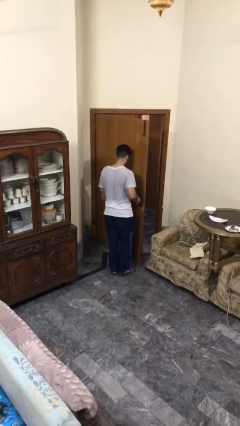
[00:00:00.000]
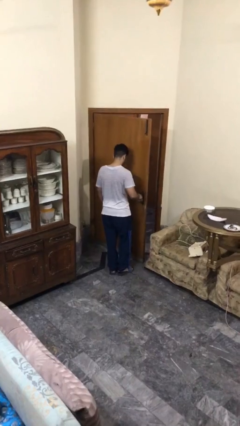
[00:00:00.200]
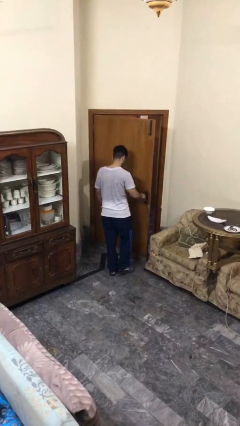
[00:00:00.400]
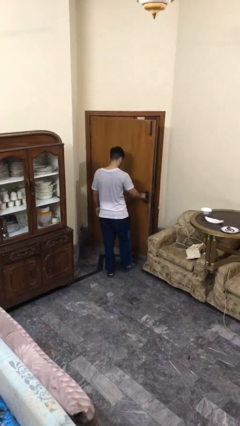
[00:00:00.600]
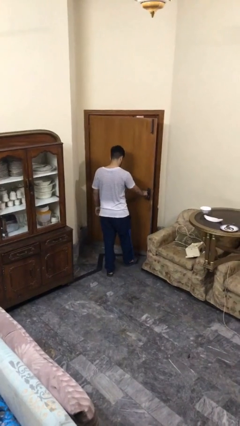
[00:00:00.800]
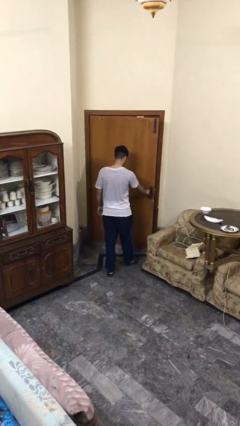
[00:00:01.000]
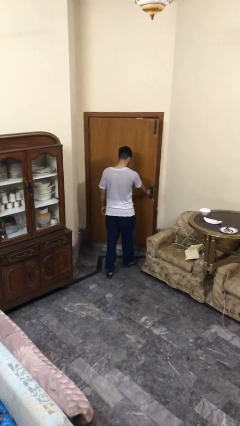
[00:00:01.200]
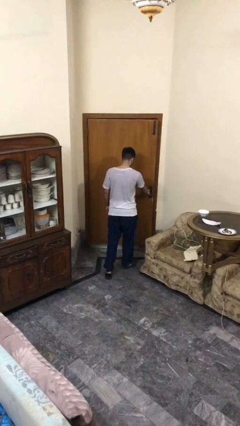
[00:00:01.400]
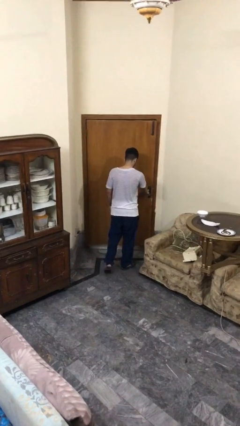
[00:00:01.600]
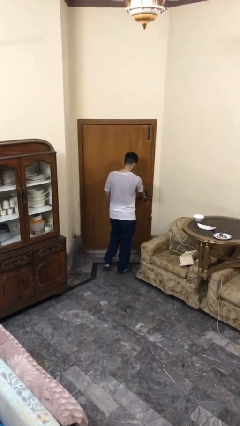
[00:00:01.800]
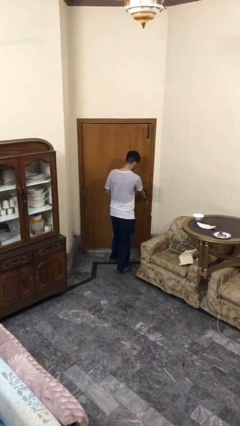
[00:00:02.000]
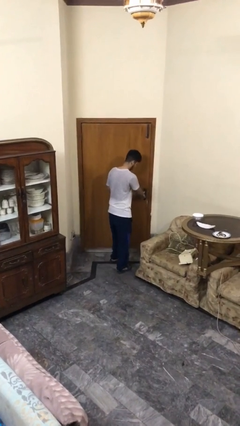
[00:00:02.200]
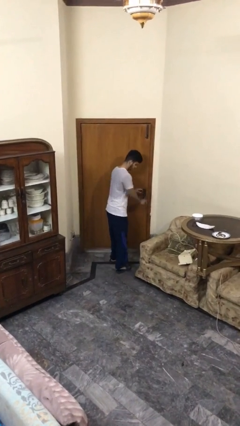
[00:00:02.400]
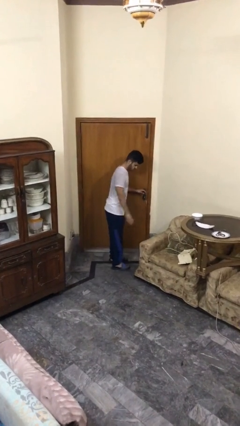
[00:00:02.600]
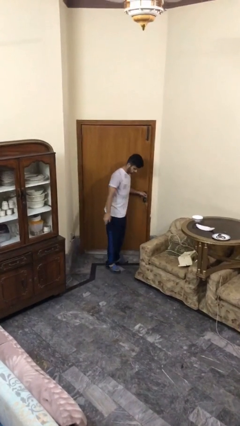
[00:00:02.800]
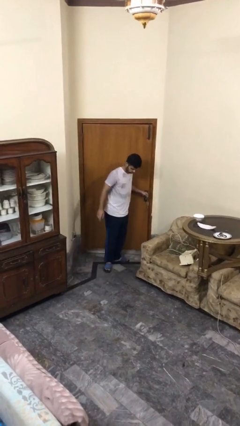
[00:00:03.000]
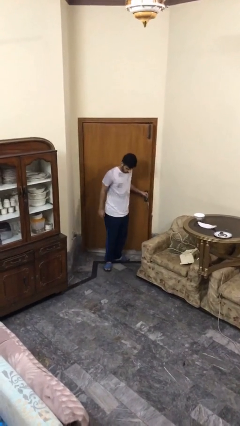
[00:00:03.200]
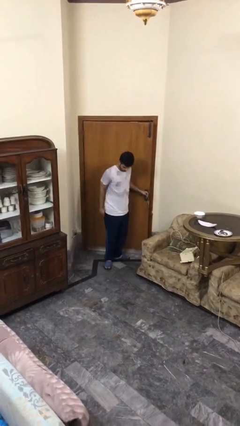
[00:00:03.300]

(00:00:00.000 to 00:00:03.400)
person closes facility door

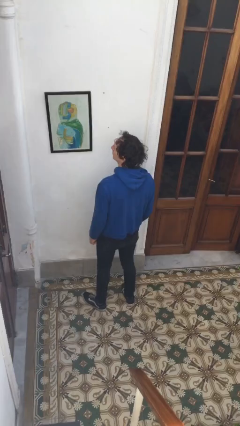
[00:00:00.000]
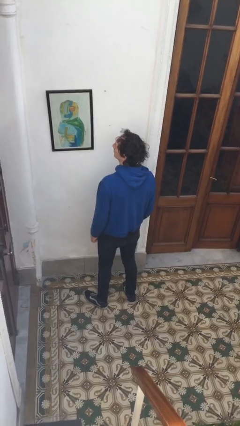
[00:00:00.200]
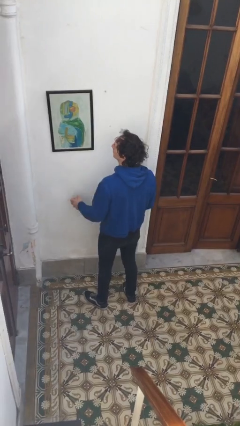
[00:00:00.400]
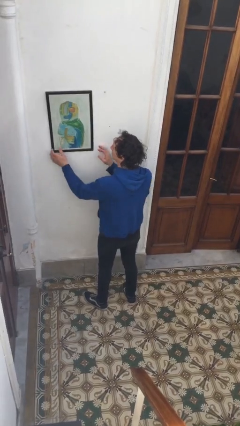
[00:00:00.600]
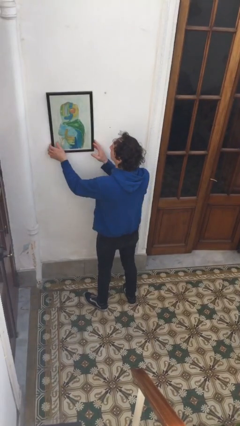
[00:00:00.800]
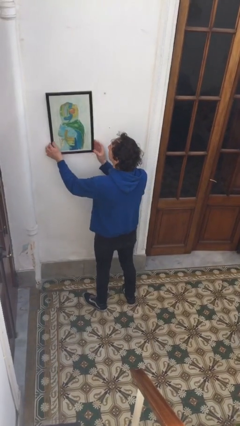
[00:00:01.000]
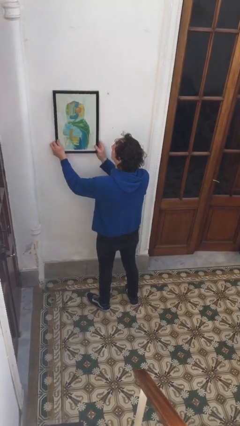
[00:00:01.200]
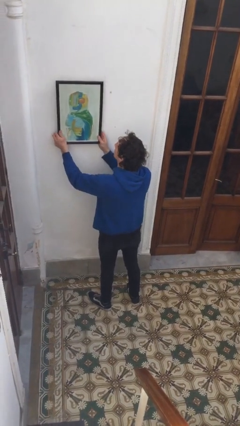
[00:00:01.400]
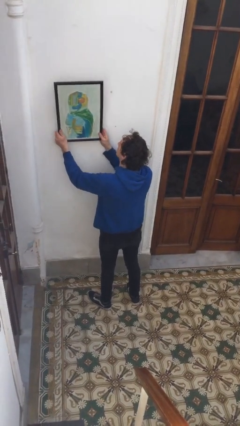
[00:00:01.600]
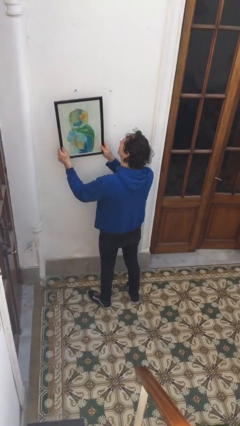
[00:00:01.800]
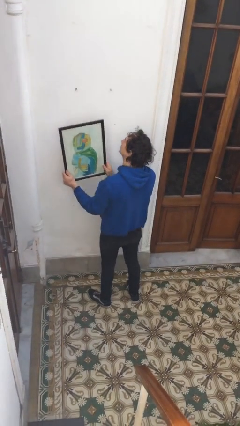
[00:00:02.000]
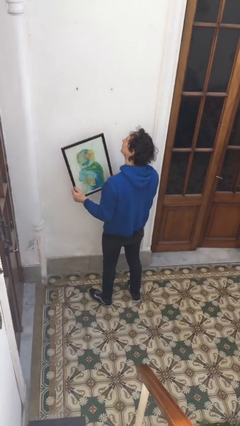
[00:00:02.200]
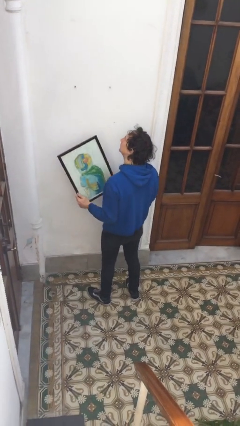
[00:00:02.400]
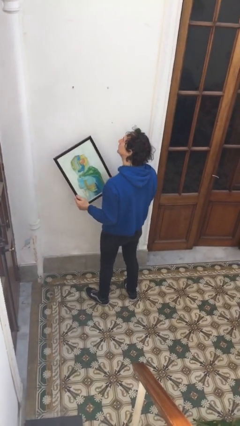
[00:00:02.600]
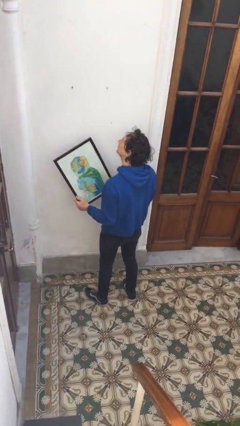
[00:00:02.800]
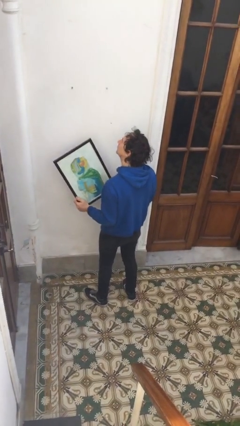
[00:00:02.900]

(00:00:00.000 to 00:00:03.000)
person takes down picture frame

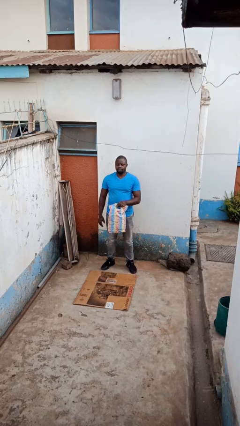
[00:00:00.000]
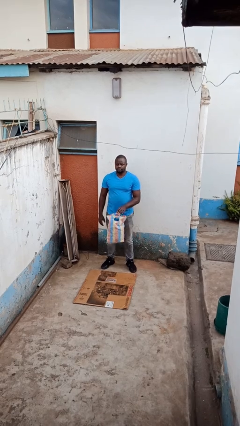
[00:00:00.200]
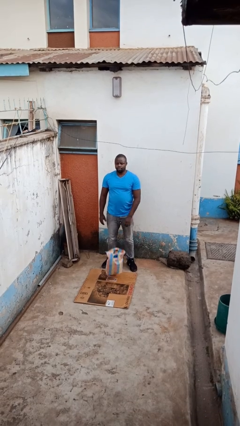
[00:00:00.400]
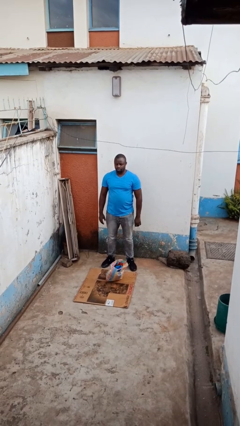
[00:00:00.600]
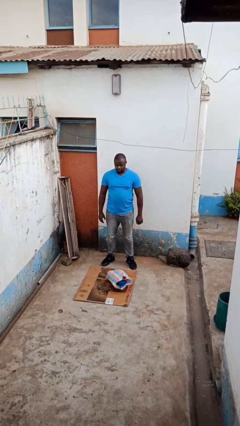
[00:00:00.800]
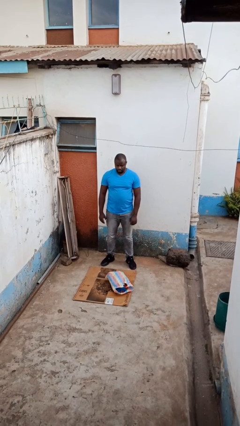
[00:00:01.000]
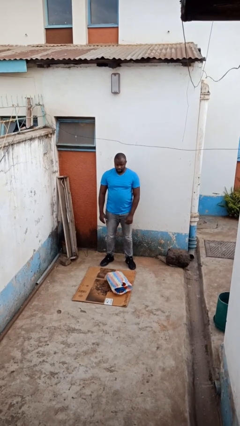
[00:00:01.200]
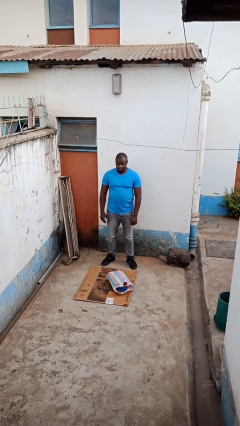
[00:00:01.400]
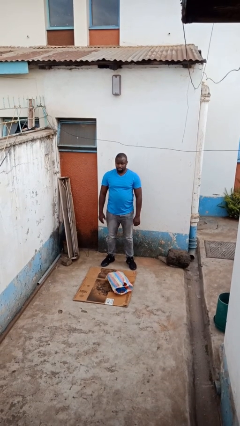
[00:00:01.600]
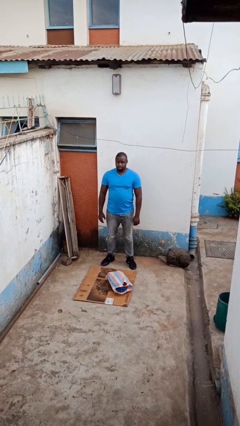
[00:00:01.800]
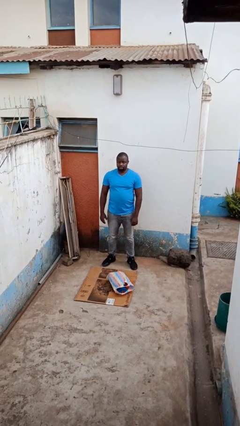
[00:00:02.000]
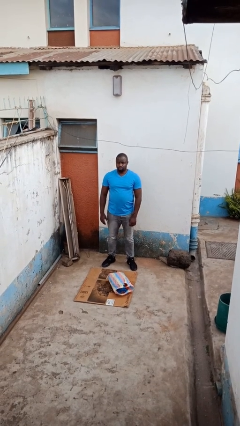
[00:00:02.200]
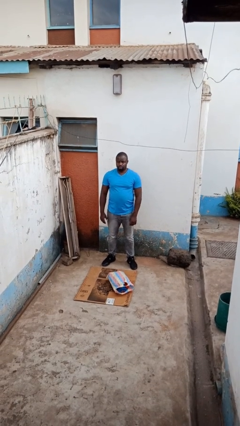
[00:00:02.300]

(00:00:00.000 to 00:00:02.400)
person drops object

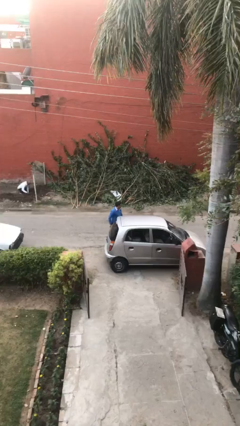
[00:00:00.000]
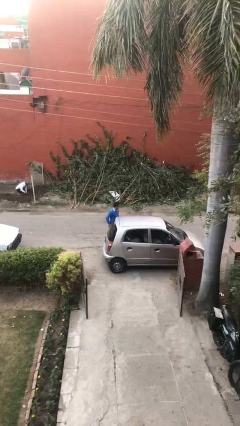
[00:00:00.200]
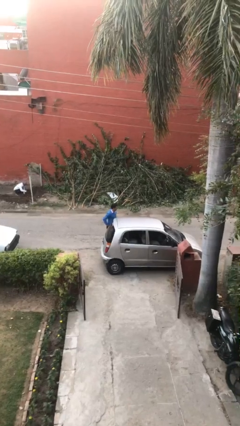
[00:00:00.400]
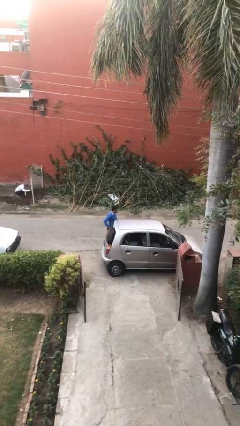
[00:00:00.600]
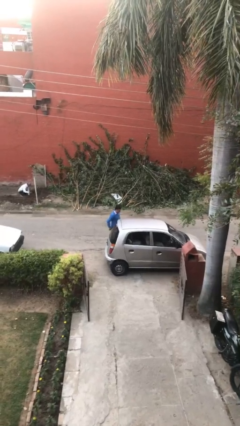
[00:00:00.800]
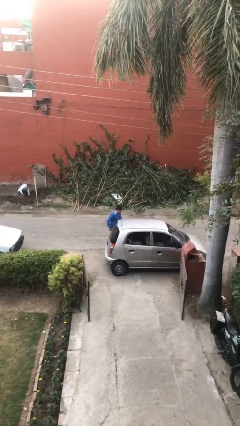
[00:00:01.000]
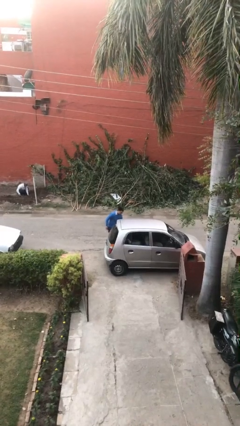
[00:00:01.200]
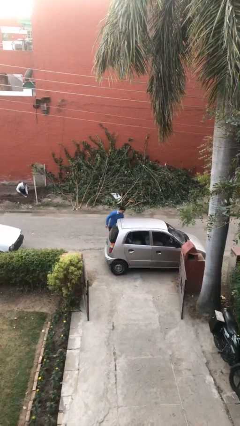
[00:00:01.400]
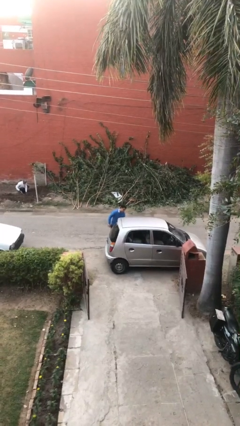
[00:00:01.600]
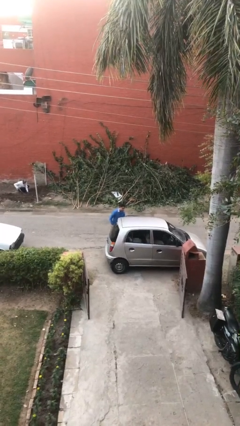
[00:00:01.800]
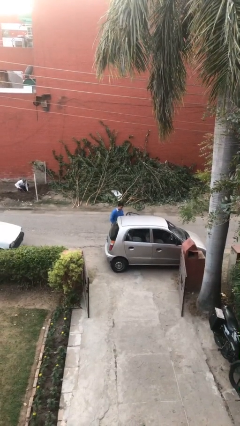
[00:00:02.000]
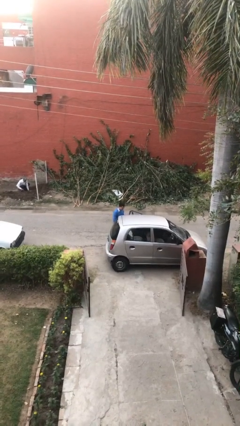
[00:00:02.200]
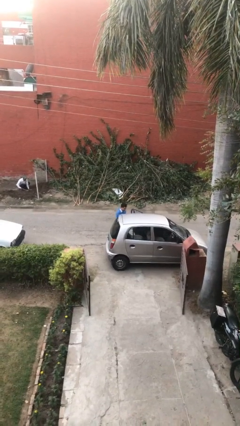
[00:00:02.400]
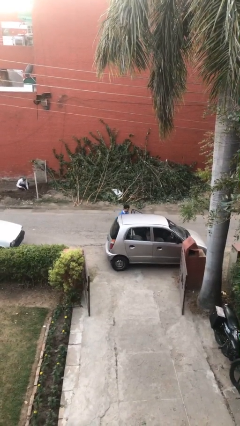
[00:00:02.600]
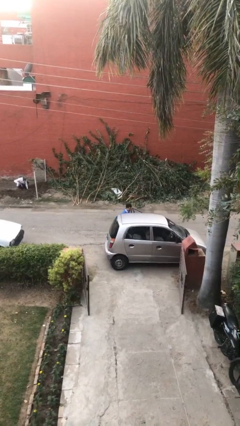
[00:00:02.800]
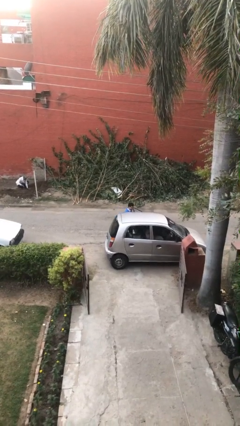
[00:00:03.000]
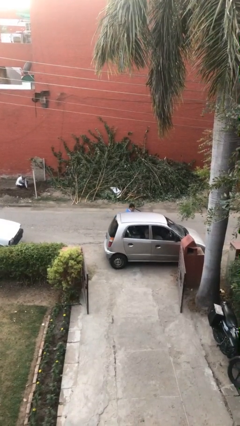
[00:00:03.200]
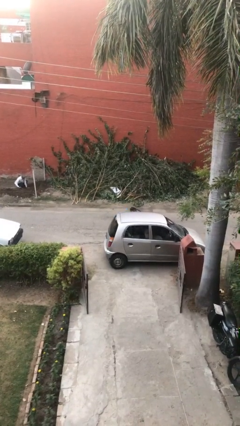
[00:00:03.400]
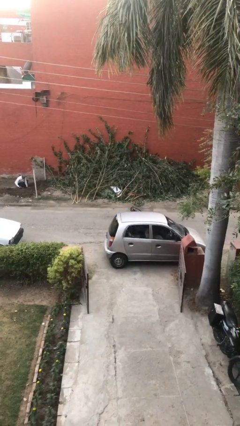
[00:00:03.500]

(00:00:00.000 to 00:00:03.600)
person enters car

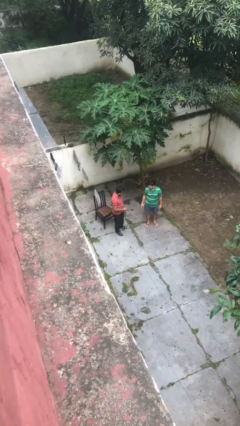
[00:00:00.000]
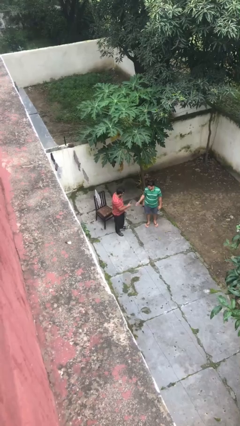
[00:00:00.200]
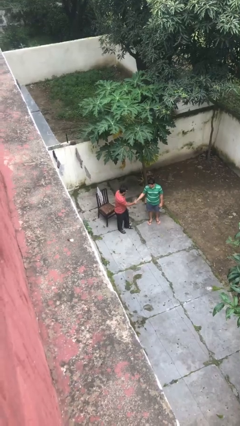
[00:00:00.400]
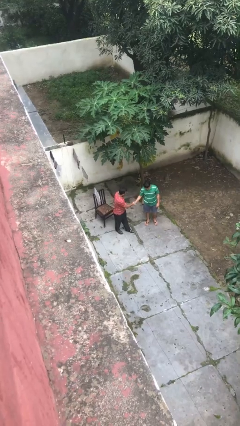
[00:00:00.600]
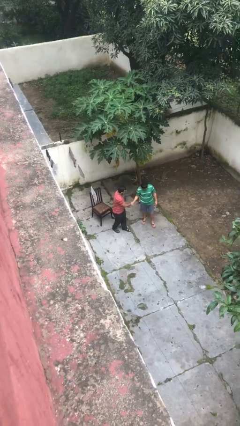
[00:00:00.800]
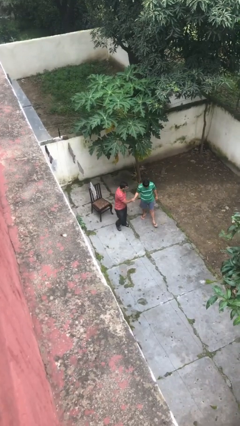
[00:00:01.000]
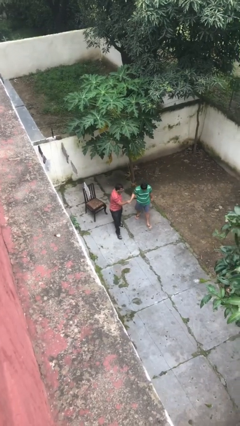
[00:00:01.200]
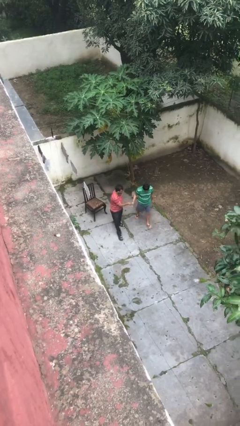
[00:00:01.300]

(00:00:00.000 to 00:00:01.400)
person shakes hand

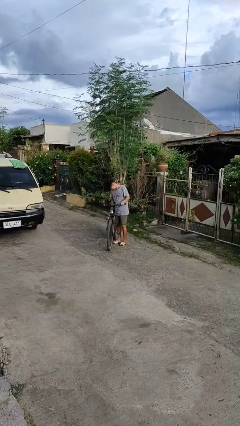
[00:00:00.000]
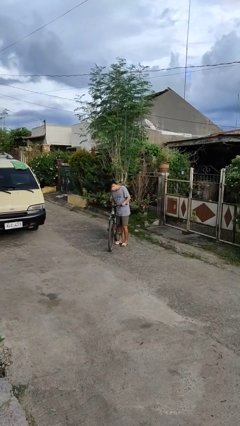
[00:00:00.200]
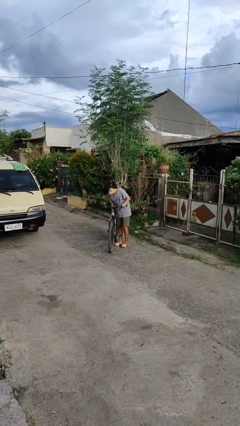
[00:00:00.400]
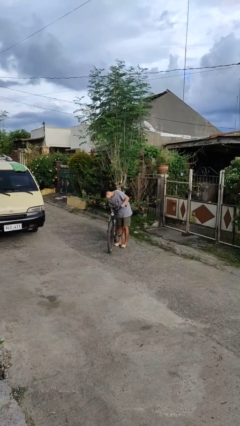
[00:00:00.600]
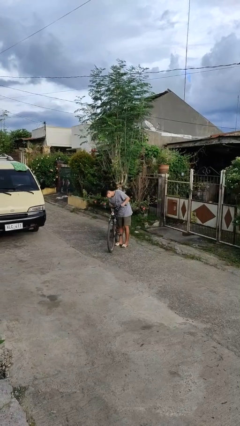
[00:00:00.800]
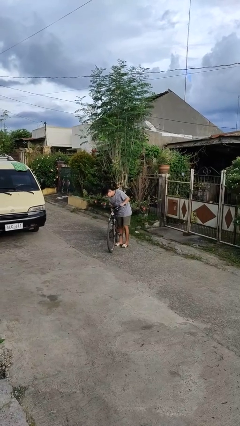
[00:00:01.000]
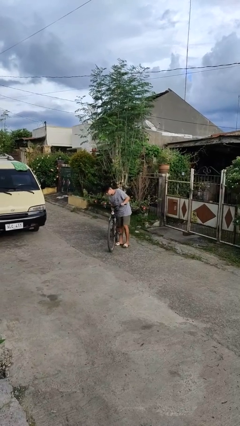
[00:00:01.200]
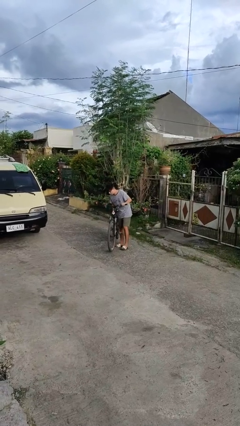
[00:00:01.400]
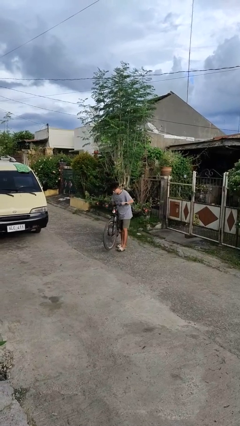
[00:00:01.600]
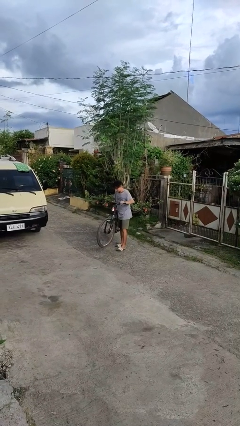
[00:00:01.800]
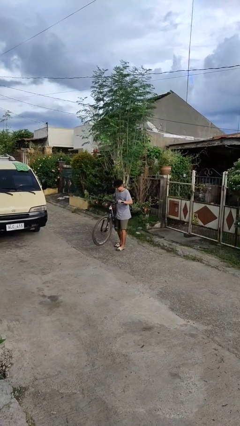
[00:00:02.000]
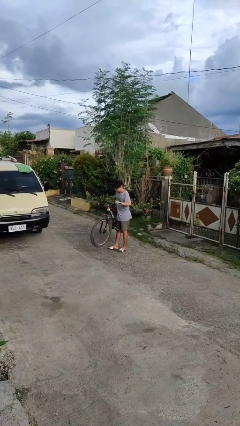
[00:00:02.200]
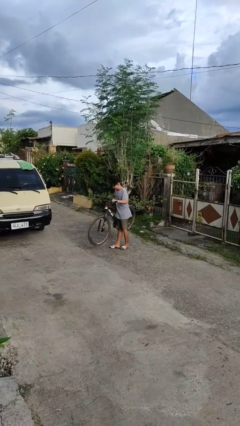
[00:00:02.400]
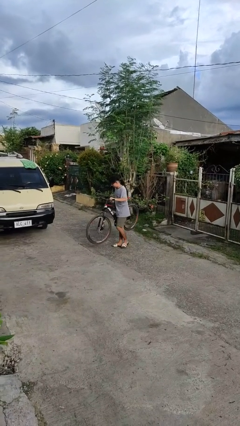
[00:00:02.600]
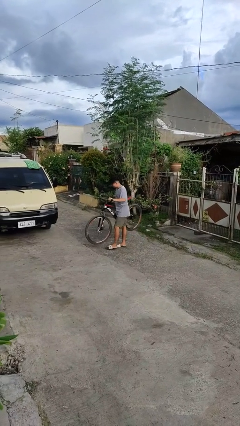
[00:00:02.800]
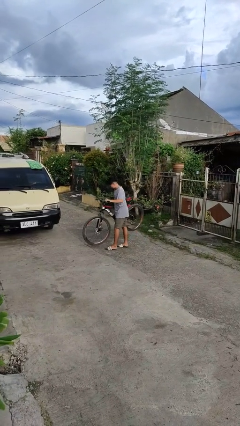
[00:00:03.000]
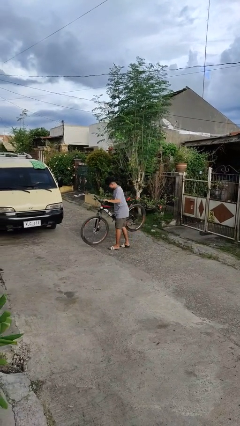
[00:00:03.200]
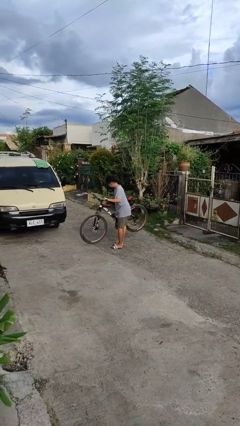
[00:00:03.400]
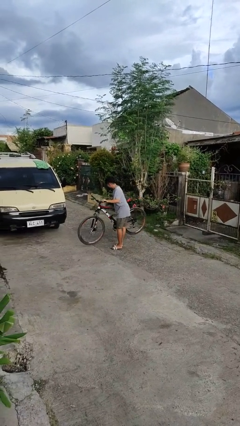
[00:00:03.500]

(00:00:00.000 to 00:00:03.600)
person carries bicycle
